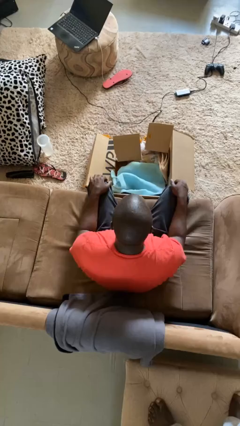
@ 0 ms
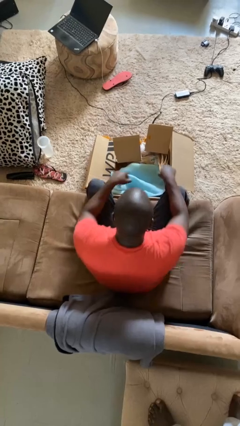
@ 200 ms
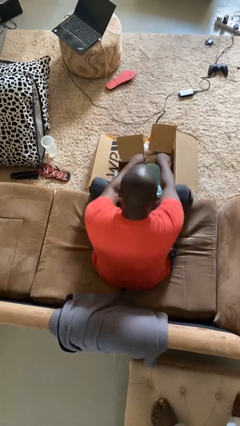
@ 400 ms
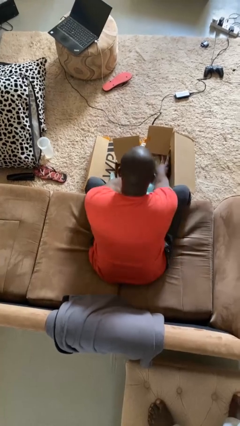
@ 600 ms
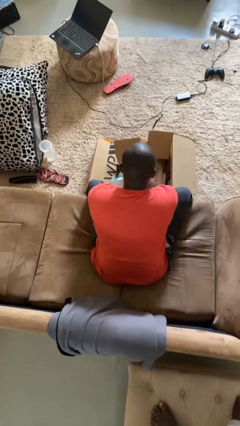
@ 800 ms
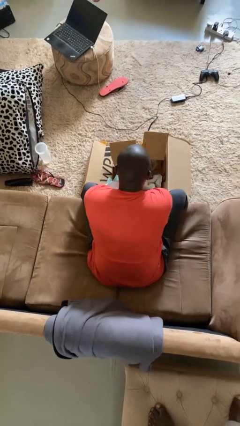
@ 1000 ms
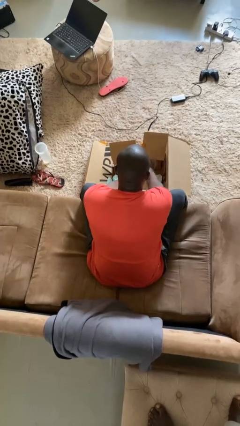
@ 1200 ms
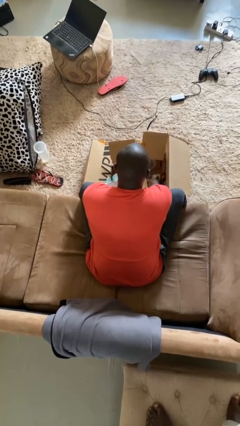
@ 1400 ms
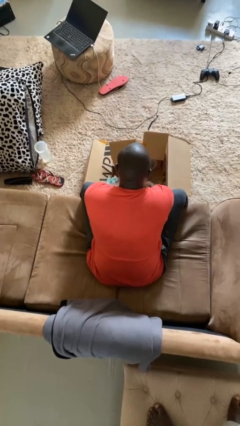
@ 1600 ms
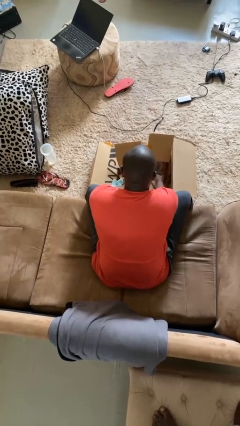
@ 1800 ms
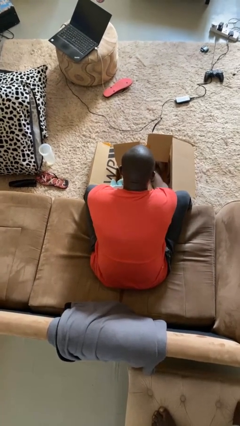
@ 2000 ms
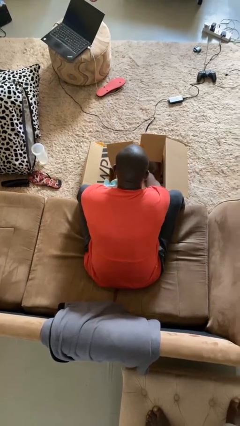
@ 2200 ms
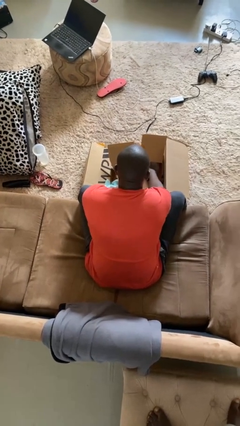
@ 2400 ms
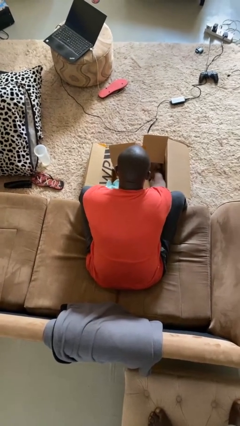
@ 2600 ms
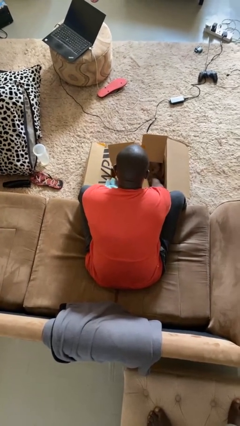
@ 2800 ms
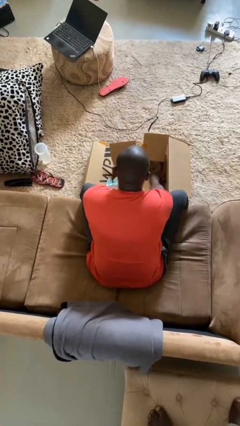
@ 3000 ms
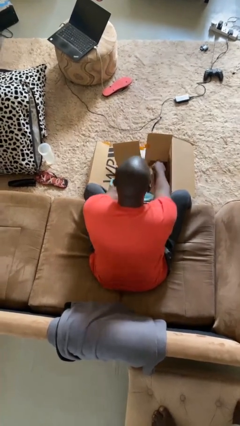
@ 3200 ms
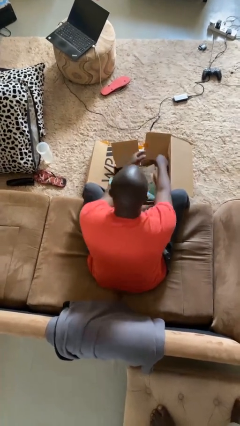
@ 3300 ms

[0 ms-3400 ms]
person searches in box

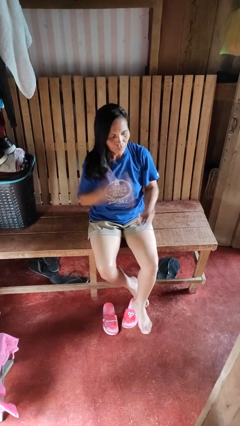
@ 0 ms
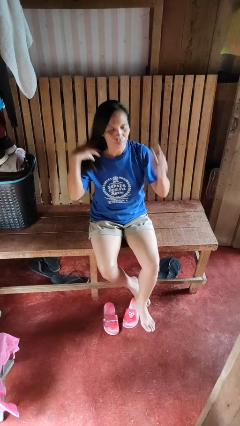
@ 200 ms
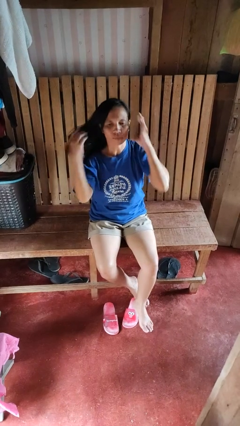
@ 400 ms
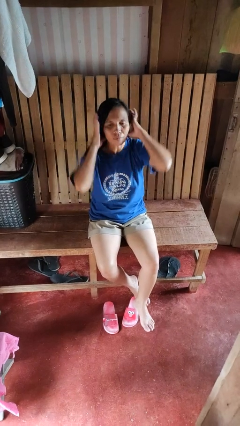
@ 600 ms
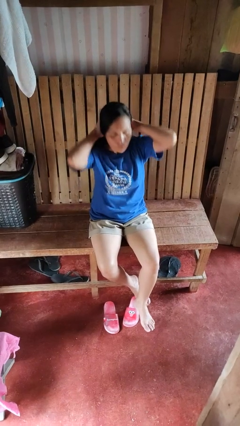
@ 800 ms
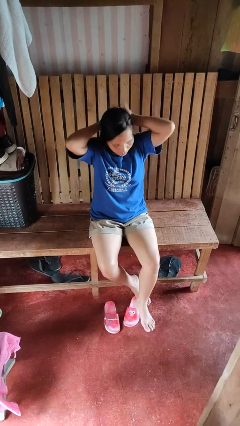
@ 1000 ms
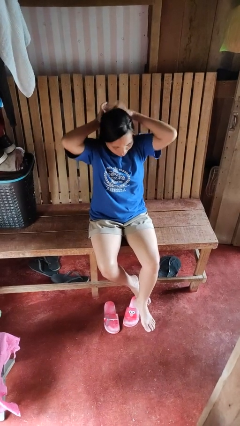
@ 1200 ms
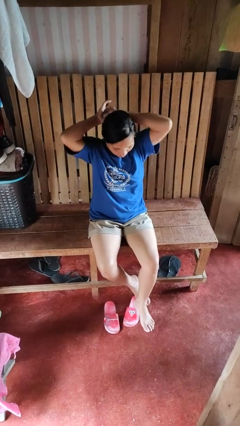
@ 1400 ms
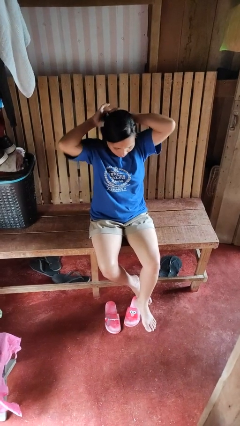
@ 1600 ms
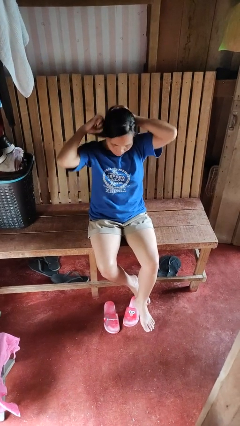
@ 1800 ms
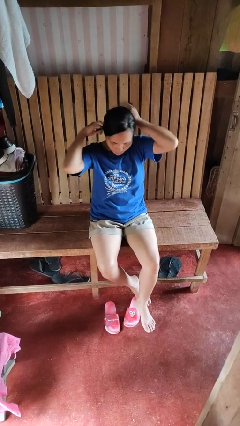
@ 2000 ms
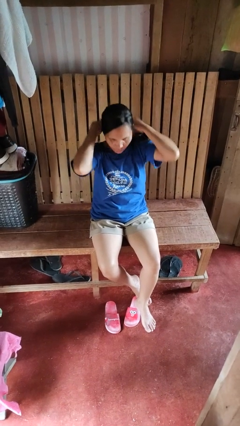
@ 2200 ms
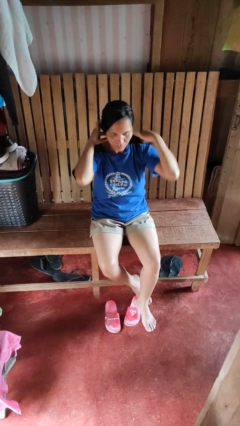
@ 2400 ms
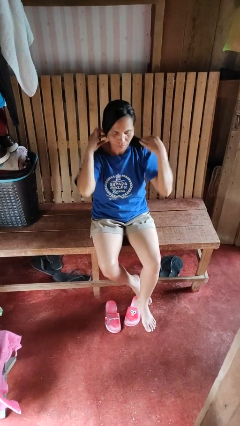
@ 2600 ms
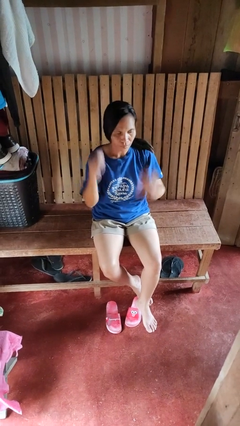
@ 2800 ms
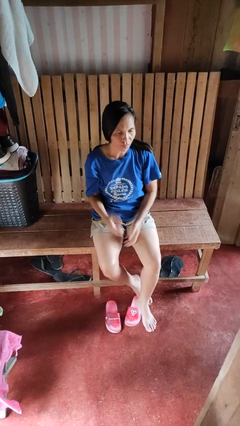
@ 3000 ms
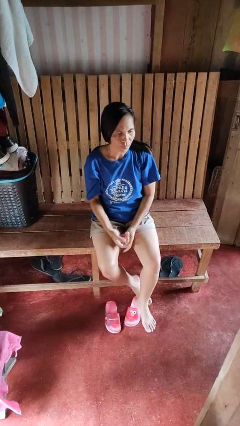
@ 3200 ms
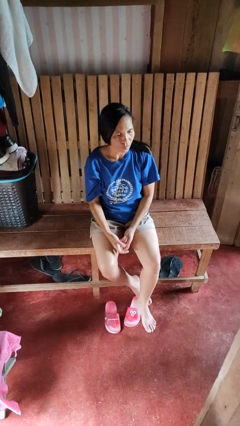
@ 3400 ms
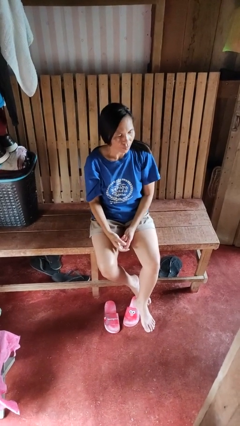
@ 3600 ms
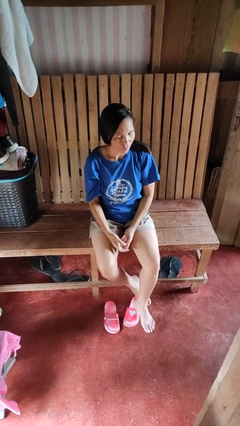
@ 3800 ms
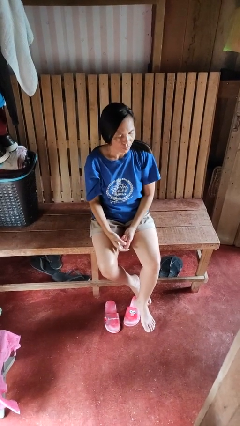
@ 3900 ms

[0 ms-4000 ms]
person puts hair in ponytail

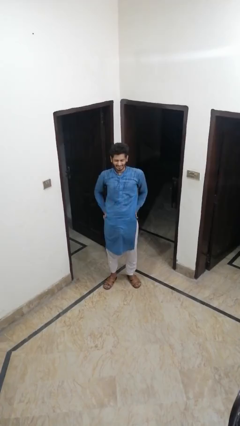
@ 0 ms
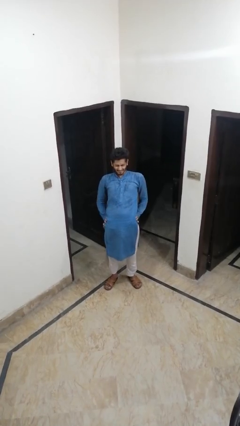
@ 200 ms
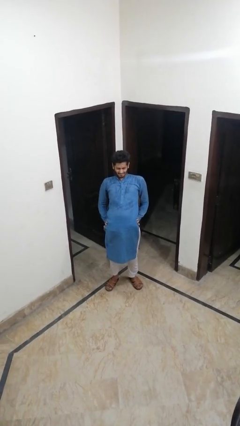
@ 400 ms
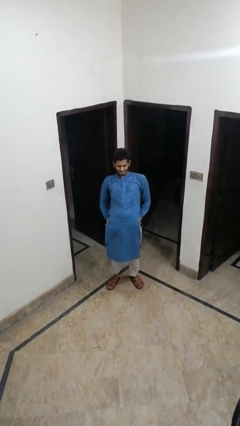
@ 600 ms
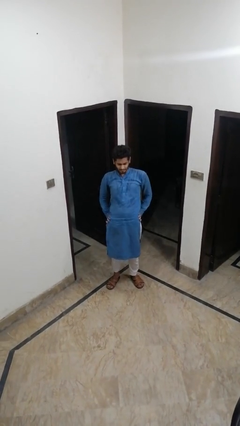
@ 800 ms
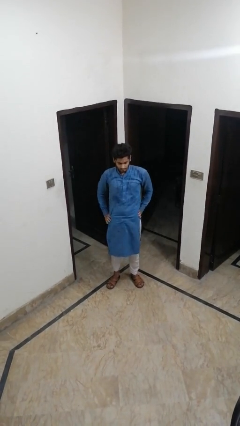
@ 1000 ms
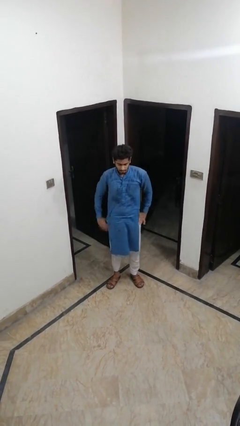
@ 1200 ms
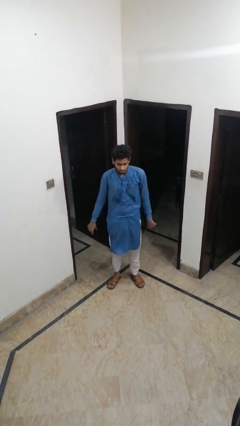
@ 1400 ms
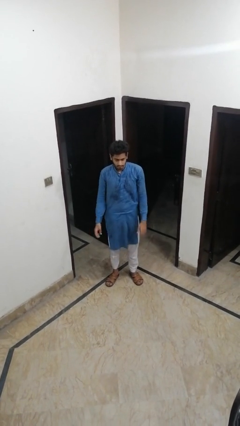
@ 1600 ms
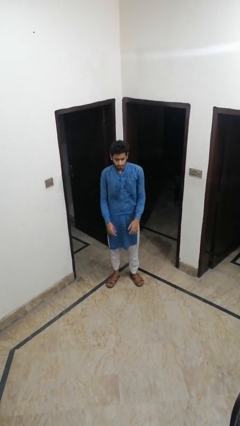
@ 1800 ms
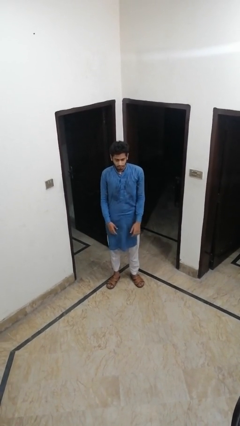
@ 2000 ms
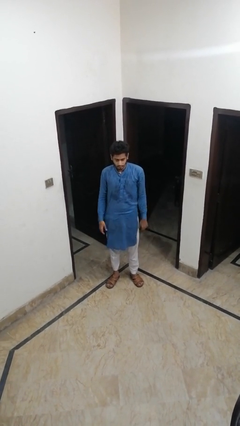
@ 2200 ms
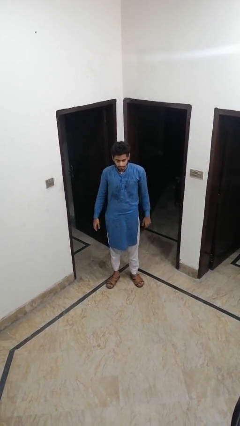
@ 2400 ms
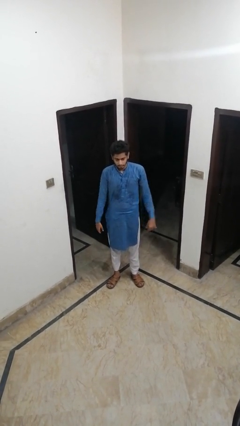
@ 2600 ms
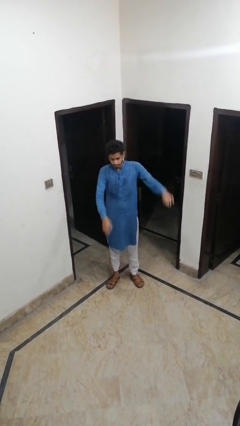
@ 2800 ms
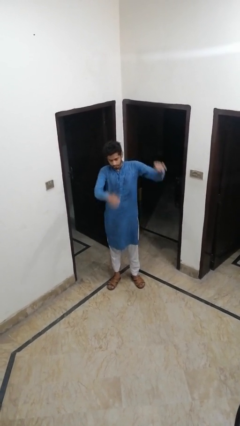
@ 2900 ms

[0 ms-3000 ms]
person stretches back

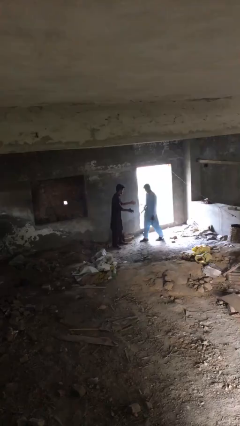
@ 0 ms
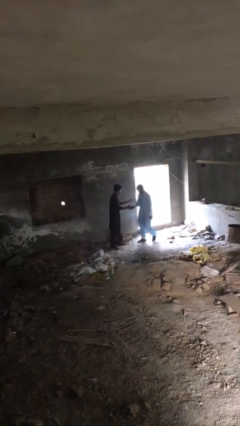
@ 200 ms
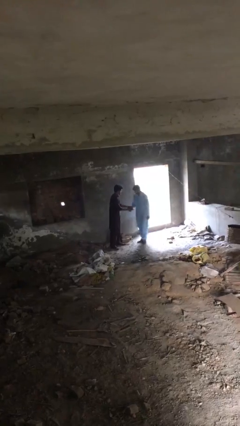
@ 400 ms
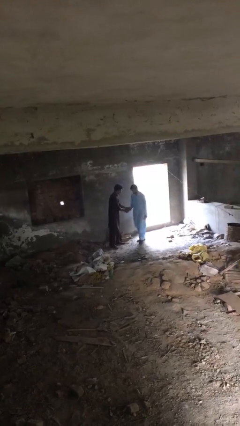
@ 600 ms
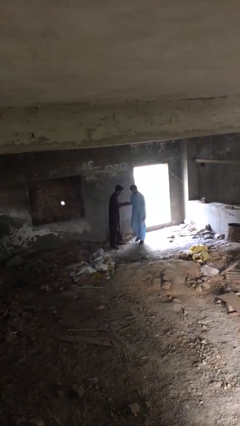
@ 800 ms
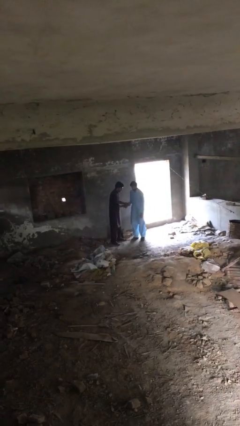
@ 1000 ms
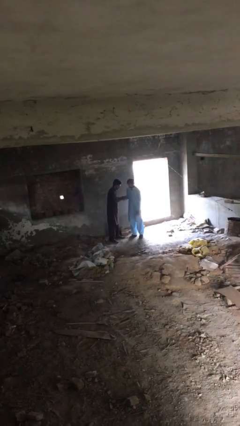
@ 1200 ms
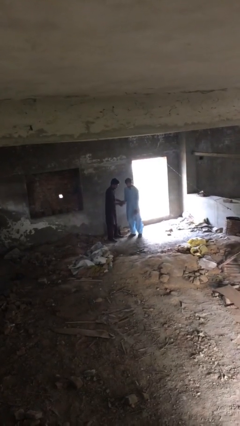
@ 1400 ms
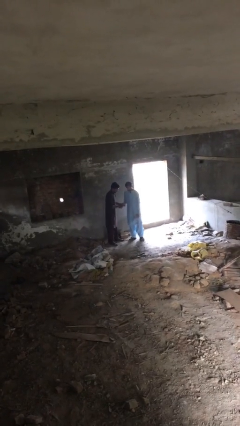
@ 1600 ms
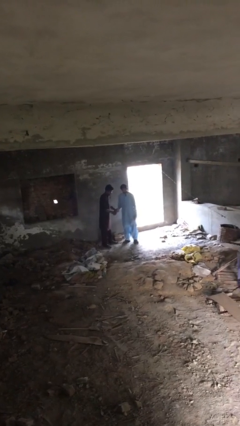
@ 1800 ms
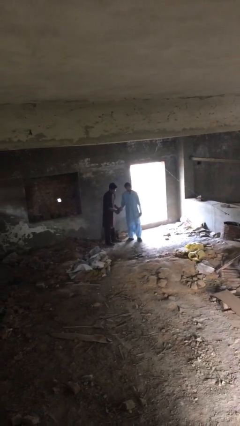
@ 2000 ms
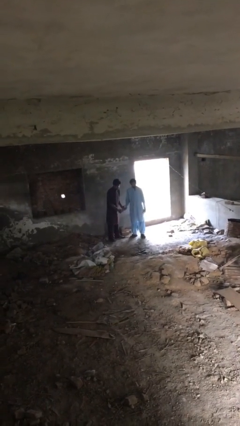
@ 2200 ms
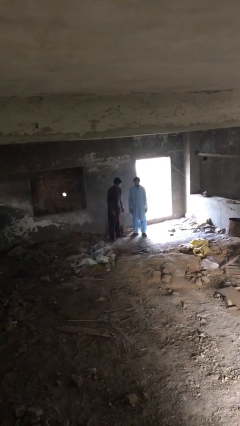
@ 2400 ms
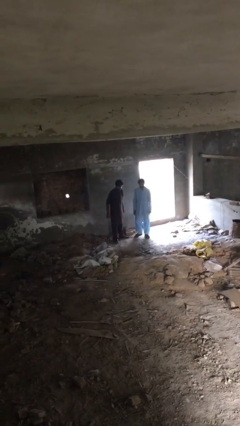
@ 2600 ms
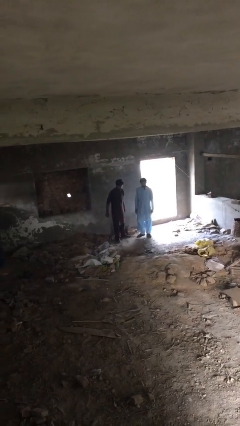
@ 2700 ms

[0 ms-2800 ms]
person shakes hand

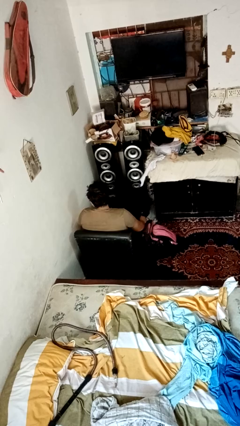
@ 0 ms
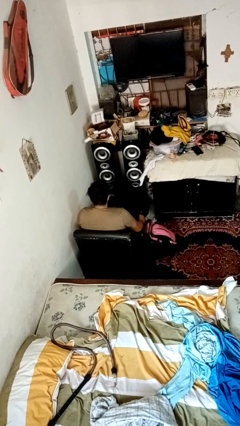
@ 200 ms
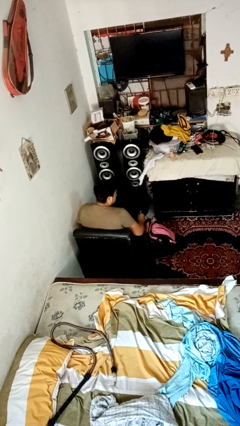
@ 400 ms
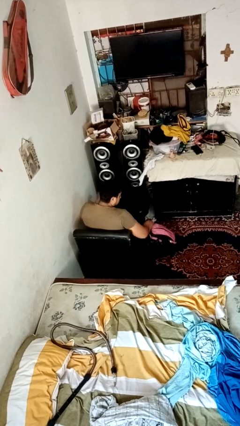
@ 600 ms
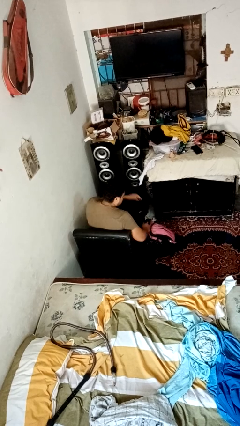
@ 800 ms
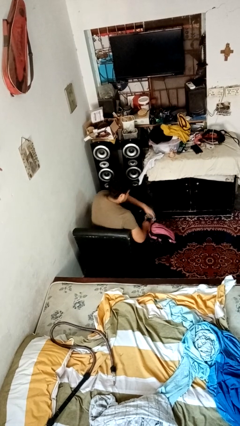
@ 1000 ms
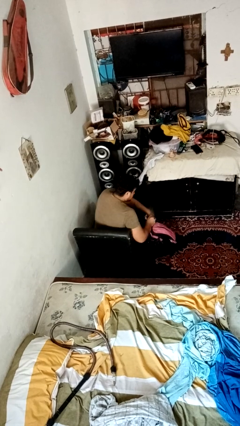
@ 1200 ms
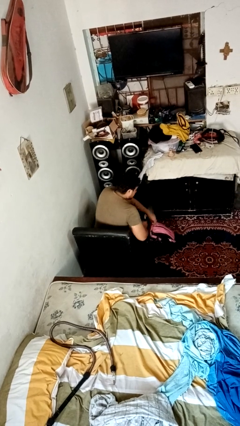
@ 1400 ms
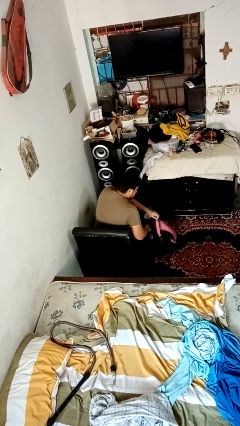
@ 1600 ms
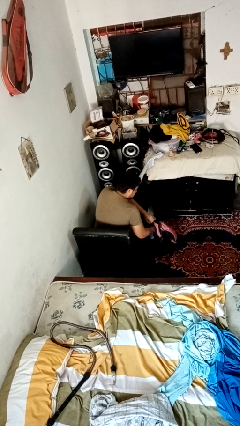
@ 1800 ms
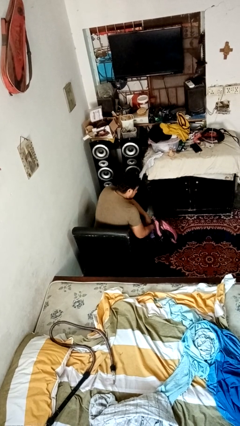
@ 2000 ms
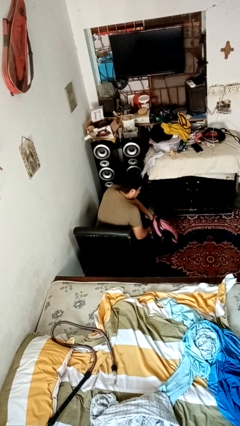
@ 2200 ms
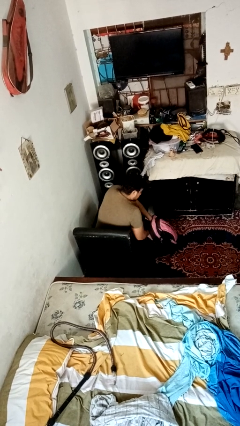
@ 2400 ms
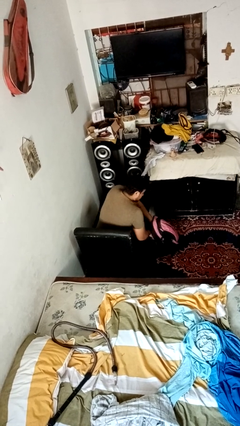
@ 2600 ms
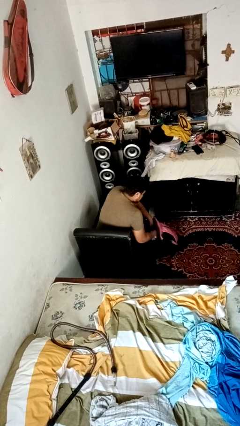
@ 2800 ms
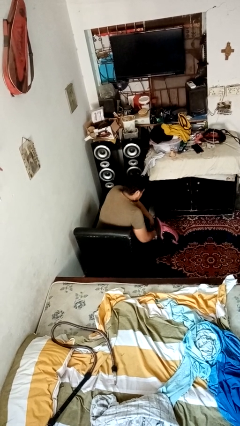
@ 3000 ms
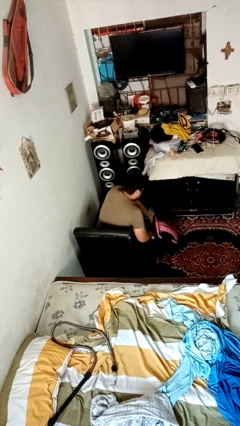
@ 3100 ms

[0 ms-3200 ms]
person searches in bag

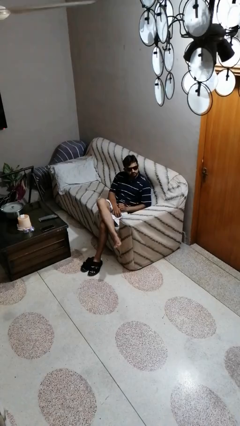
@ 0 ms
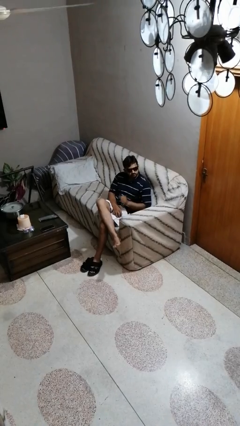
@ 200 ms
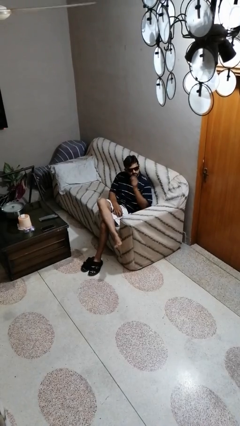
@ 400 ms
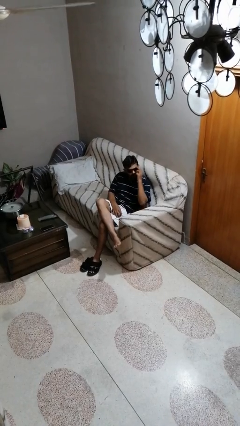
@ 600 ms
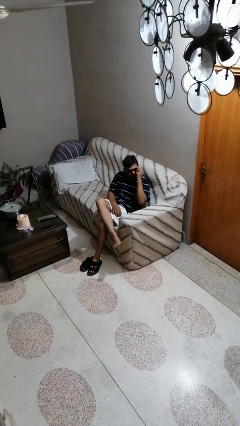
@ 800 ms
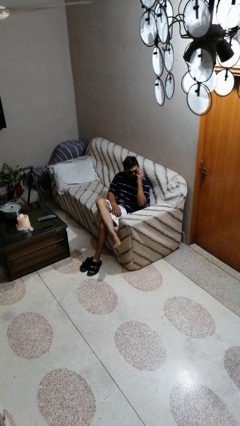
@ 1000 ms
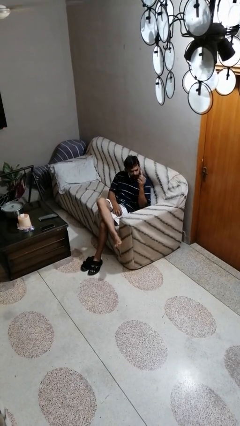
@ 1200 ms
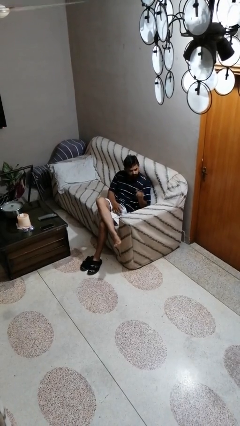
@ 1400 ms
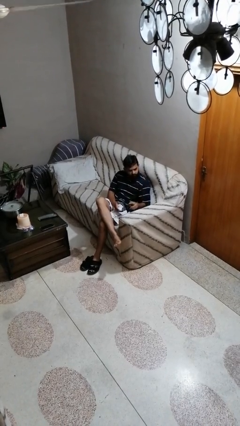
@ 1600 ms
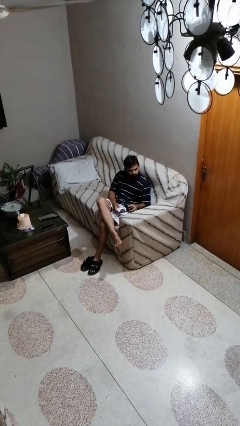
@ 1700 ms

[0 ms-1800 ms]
person takes off sunglasses
